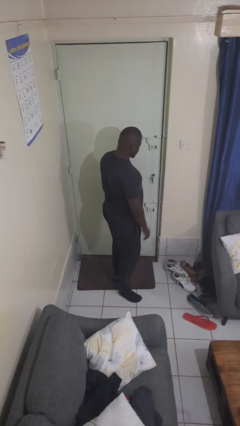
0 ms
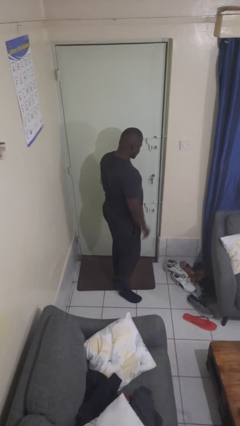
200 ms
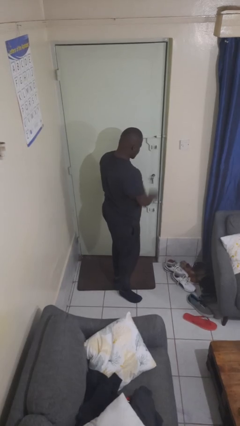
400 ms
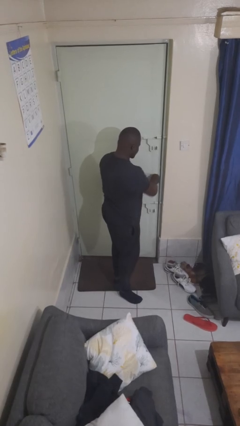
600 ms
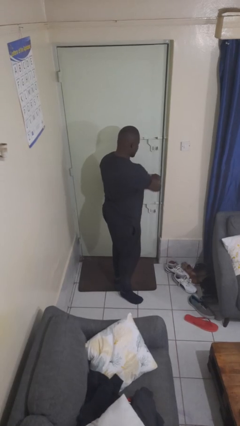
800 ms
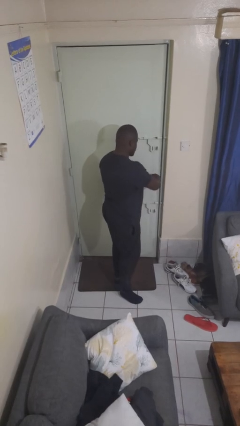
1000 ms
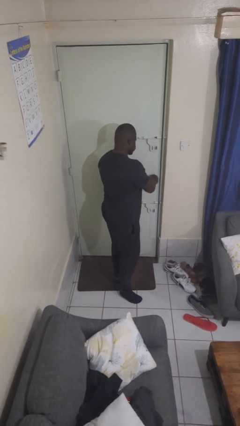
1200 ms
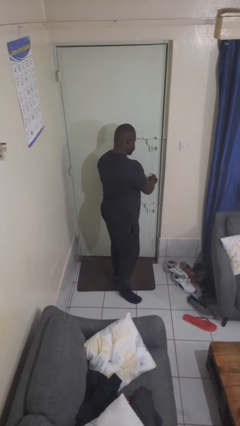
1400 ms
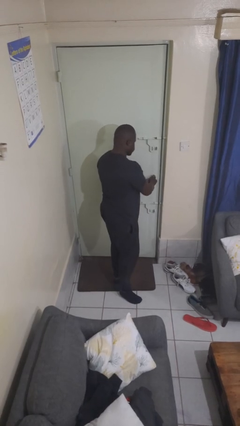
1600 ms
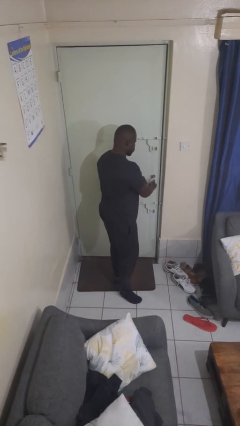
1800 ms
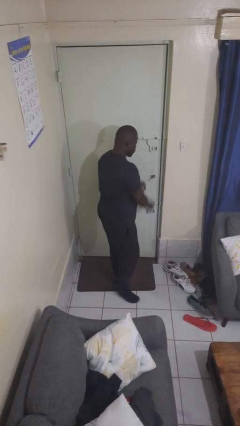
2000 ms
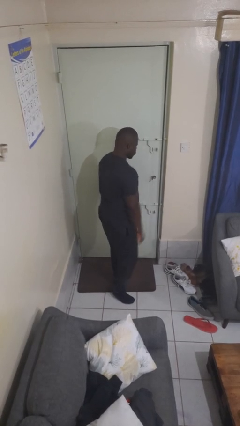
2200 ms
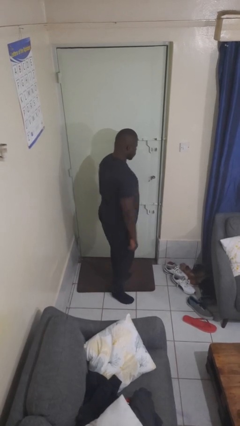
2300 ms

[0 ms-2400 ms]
person locks door with keys

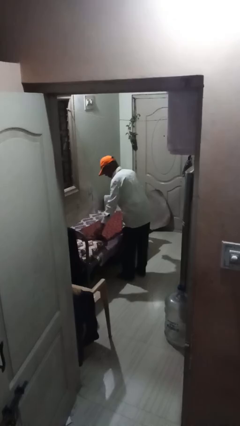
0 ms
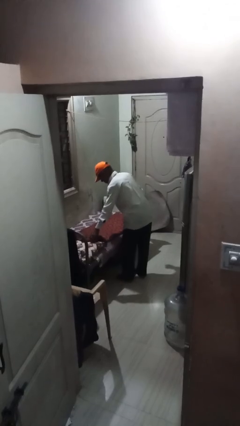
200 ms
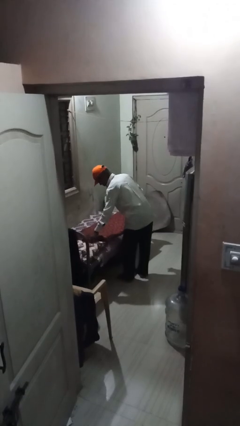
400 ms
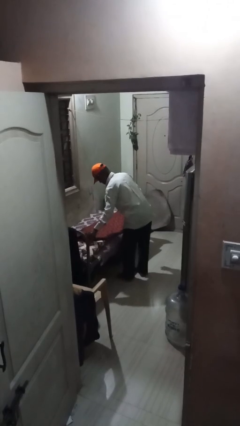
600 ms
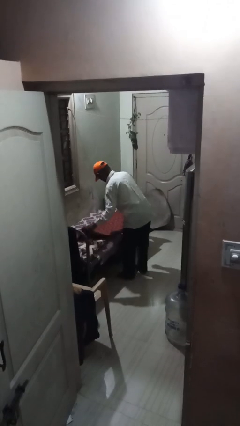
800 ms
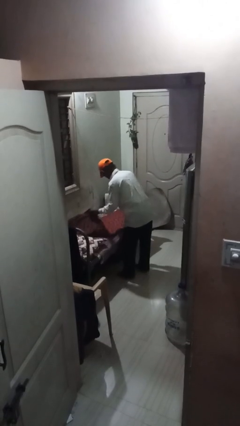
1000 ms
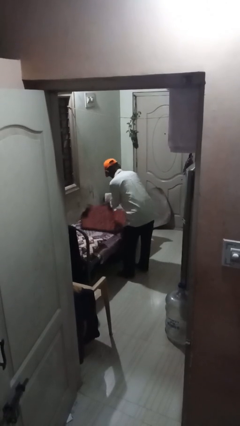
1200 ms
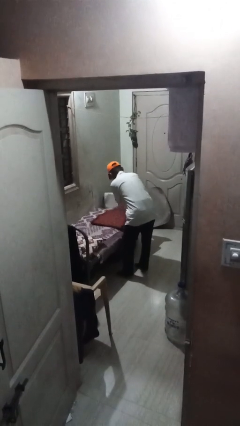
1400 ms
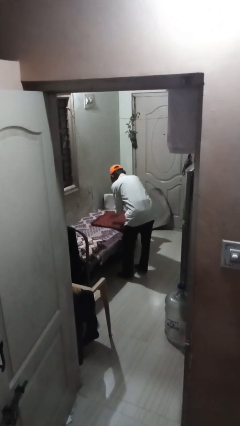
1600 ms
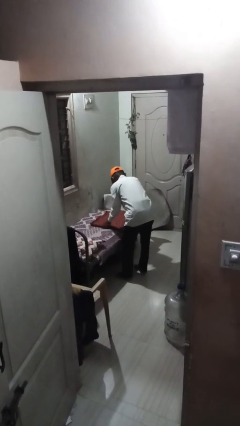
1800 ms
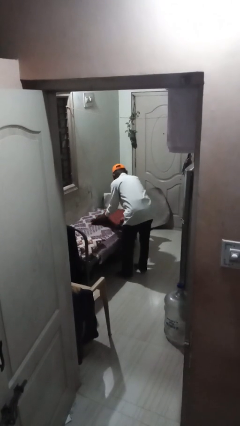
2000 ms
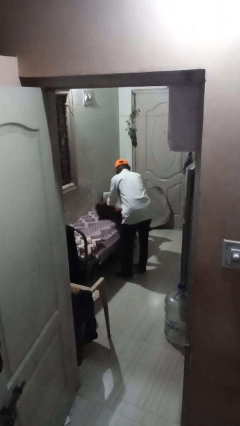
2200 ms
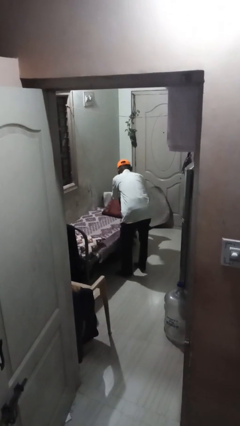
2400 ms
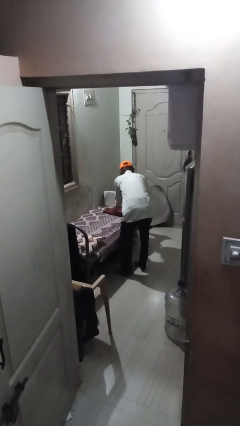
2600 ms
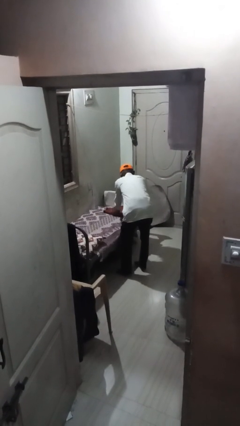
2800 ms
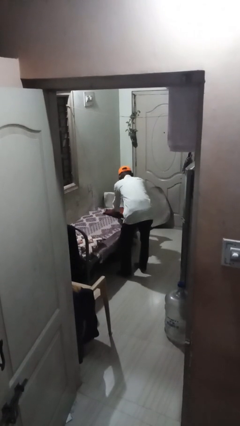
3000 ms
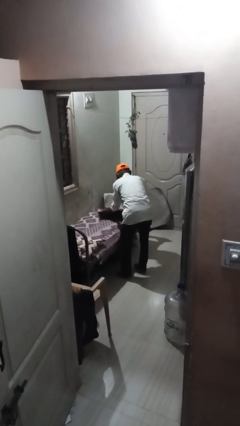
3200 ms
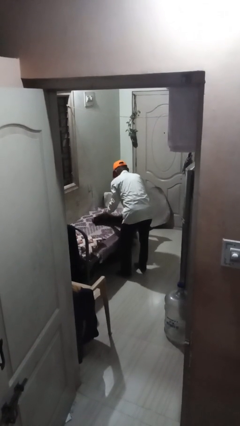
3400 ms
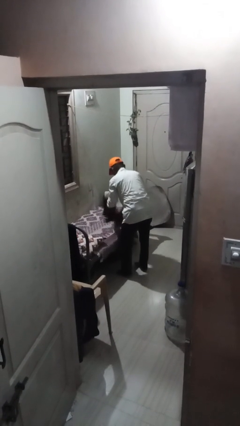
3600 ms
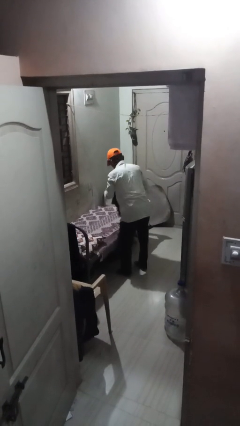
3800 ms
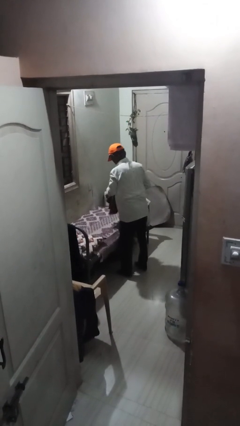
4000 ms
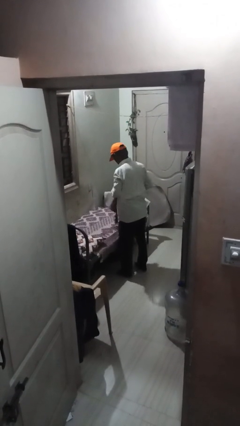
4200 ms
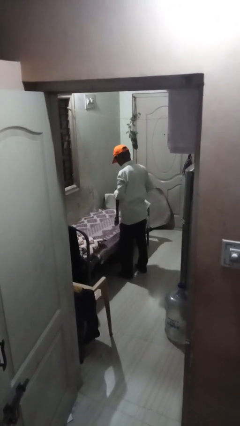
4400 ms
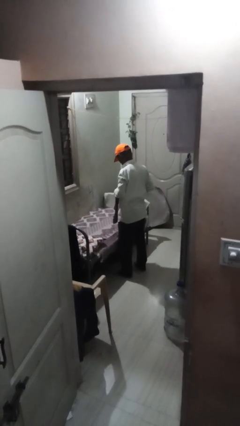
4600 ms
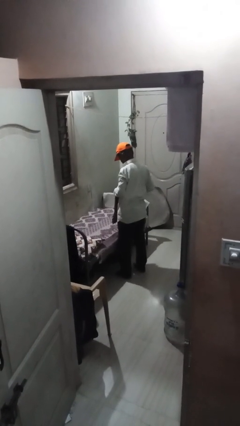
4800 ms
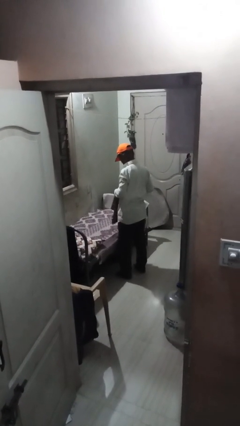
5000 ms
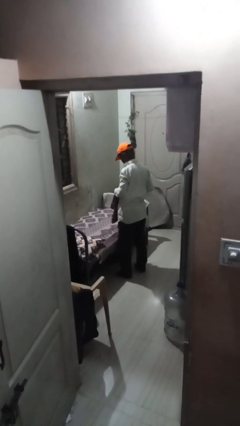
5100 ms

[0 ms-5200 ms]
person folds blanket

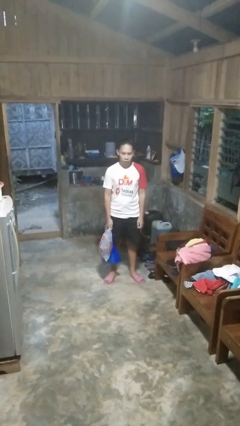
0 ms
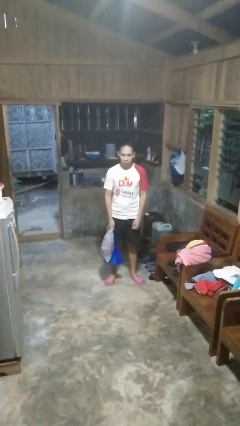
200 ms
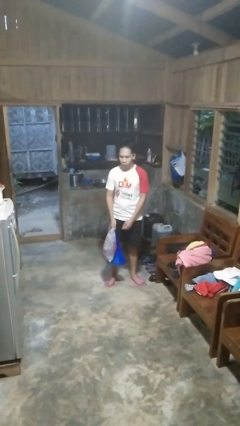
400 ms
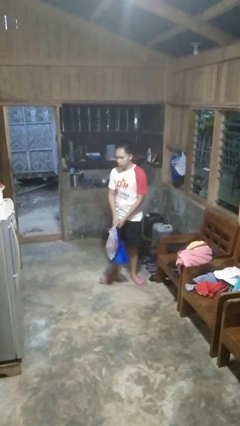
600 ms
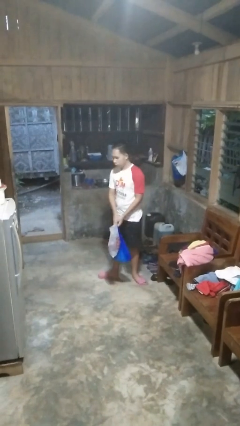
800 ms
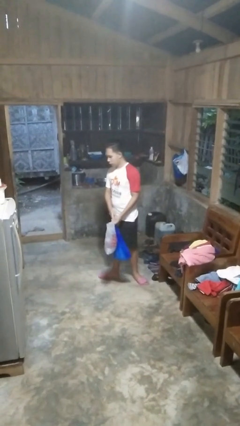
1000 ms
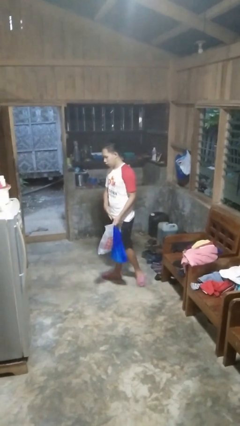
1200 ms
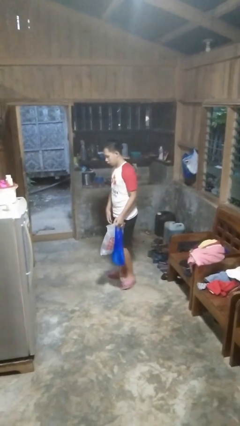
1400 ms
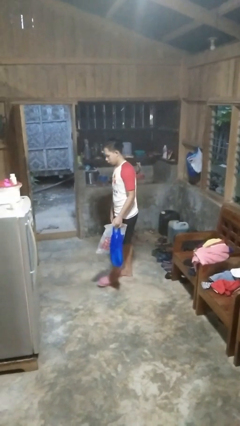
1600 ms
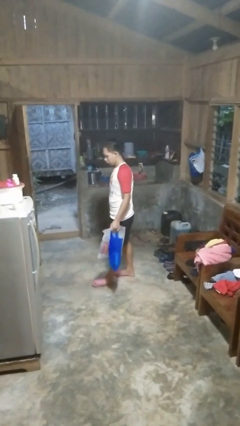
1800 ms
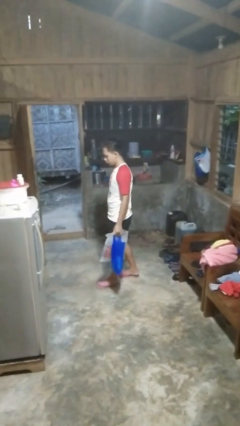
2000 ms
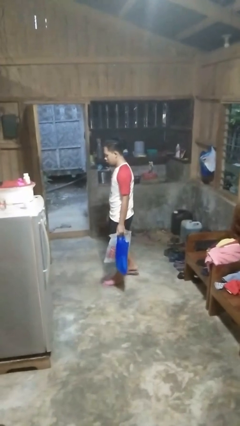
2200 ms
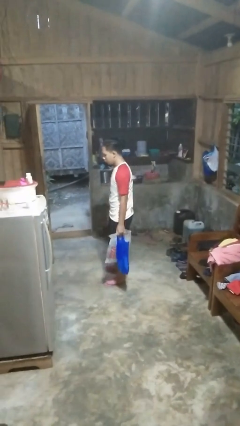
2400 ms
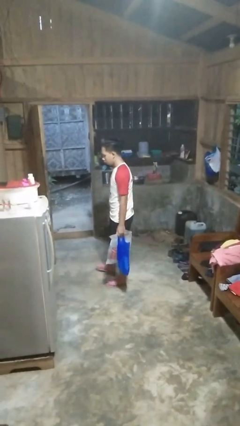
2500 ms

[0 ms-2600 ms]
person carries groceries

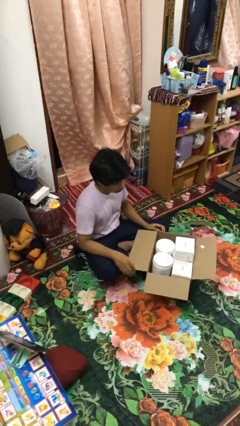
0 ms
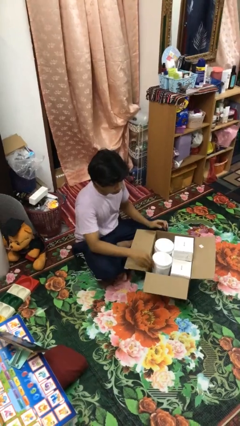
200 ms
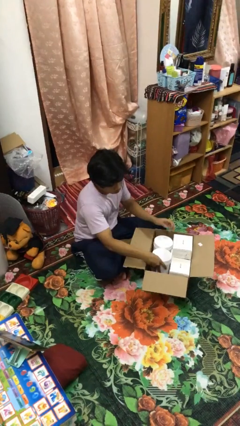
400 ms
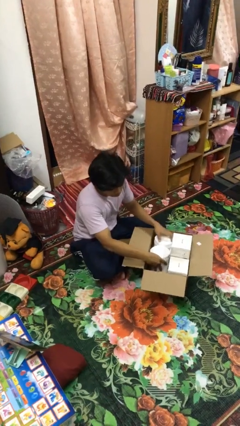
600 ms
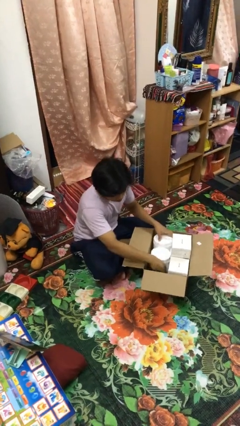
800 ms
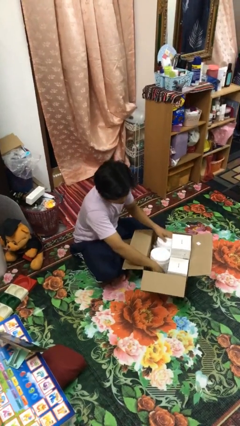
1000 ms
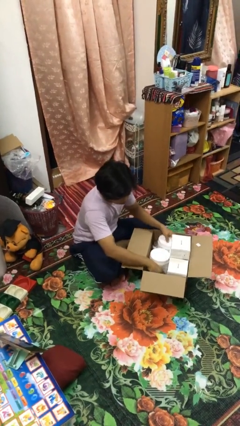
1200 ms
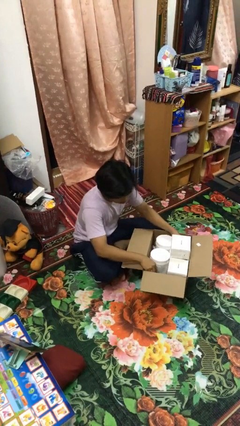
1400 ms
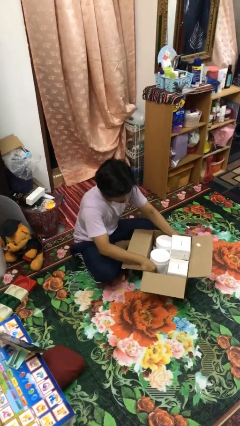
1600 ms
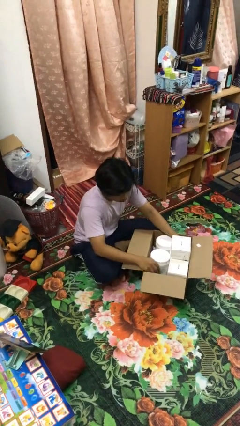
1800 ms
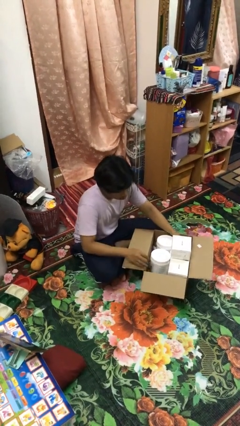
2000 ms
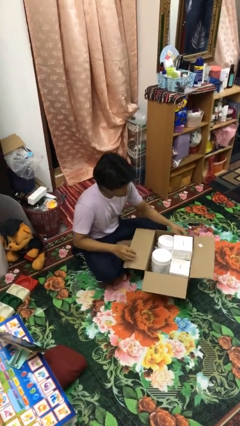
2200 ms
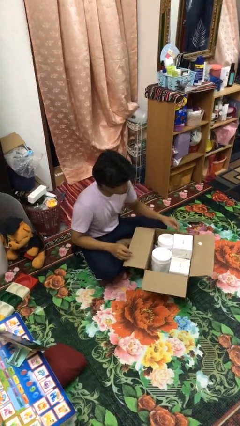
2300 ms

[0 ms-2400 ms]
person searches in box

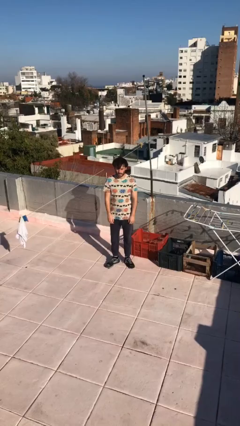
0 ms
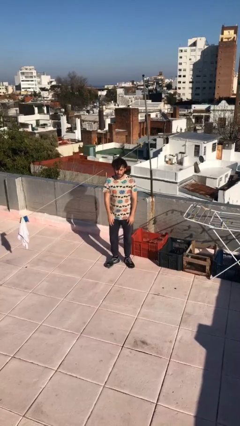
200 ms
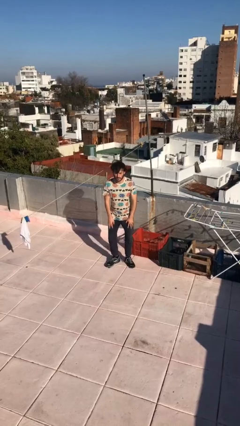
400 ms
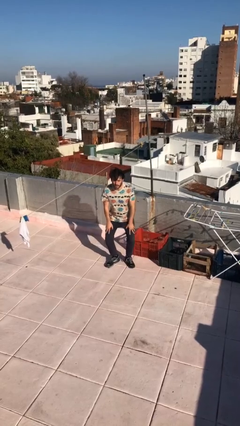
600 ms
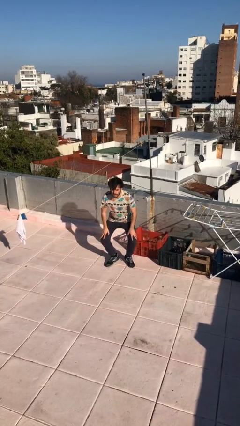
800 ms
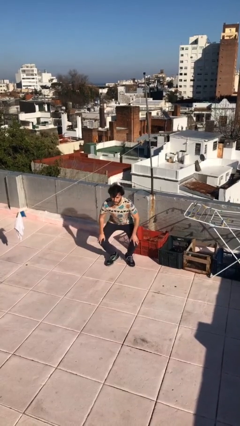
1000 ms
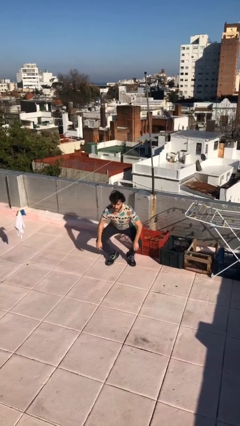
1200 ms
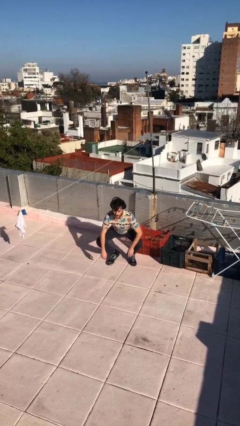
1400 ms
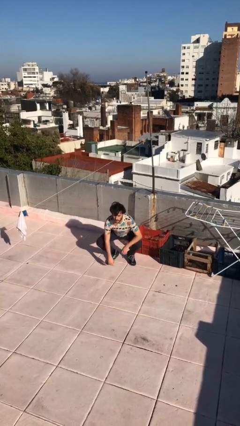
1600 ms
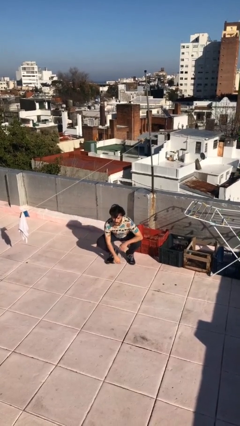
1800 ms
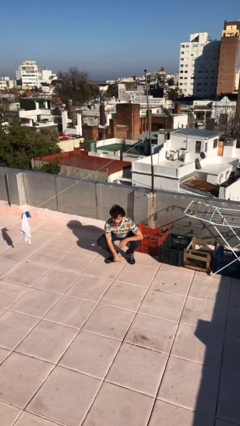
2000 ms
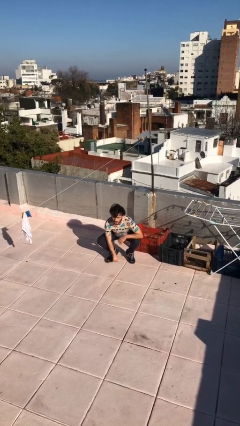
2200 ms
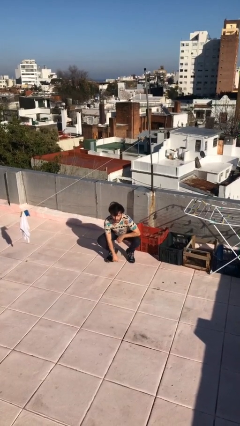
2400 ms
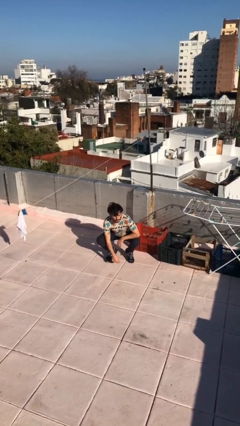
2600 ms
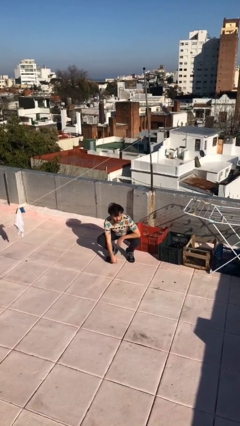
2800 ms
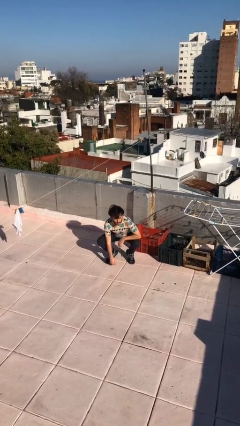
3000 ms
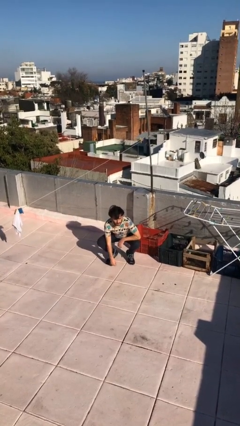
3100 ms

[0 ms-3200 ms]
person squats

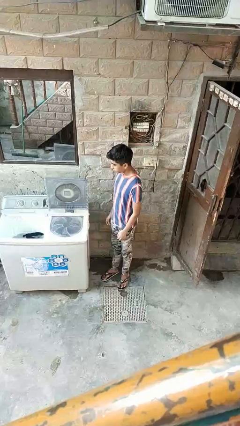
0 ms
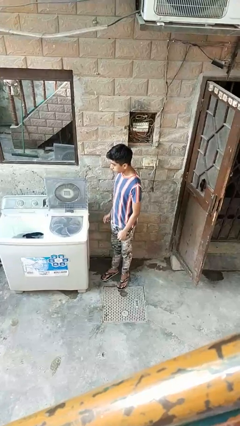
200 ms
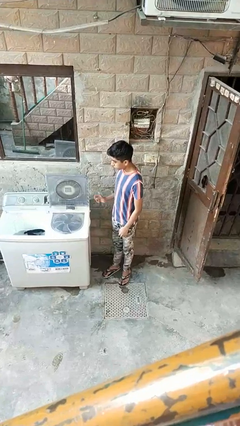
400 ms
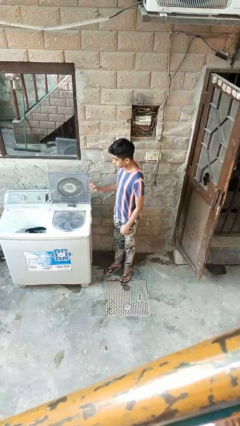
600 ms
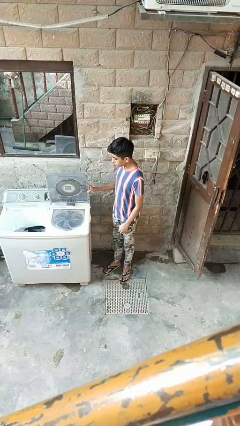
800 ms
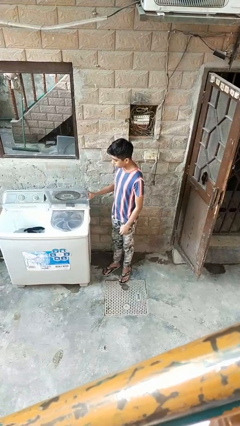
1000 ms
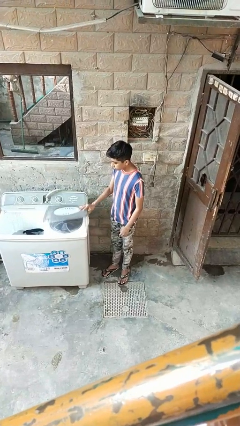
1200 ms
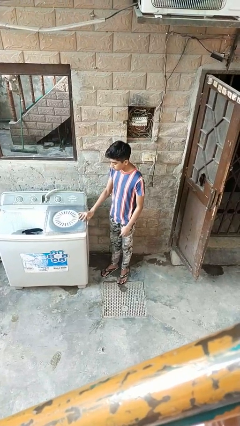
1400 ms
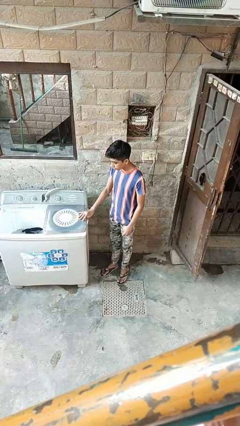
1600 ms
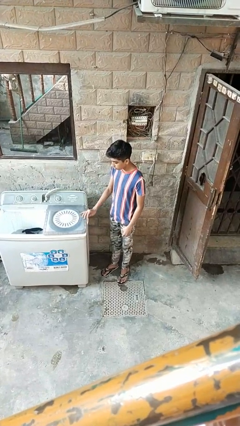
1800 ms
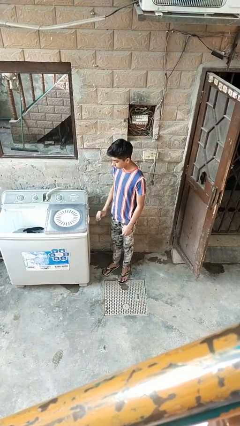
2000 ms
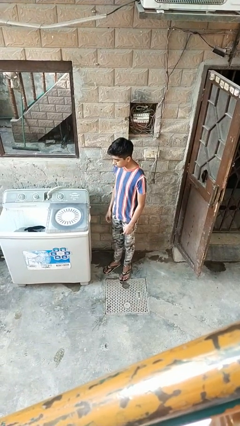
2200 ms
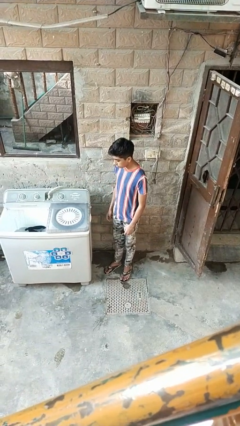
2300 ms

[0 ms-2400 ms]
person closes clothes washer
